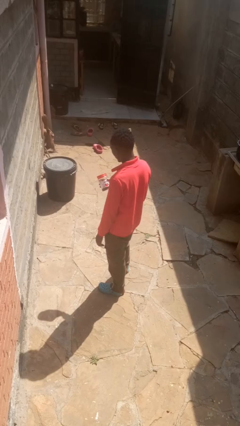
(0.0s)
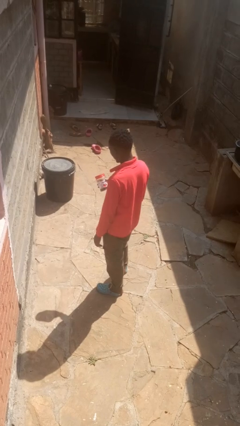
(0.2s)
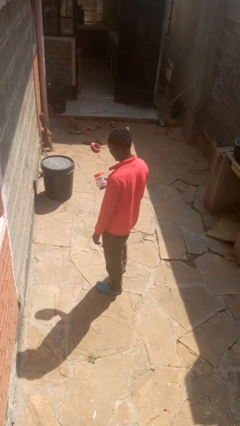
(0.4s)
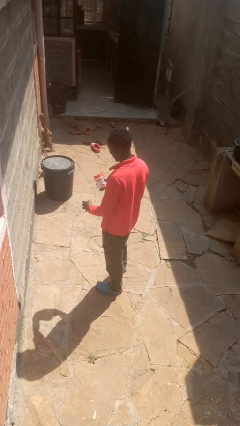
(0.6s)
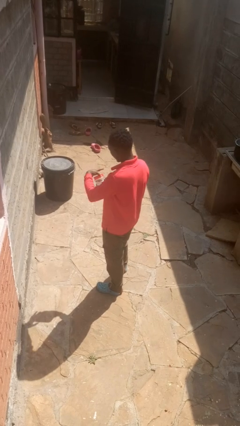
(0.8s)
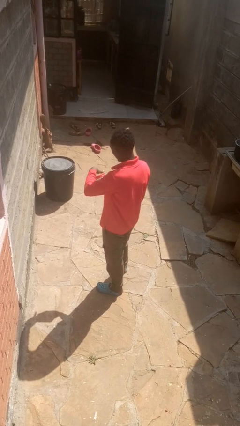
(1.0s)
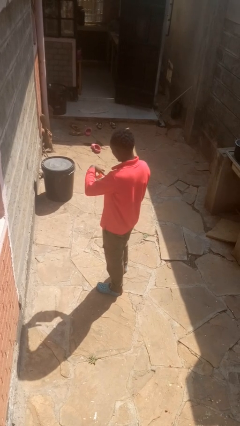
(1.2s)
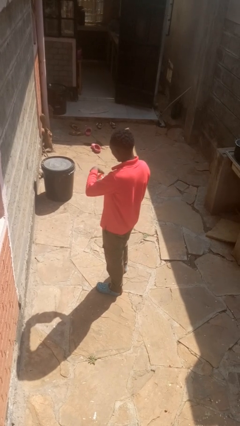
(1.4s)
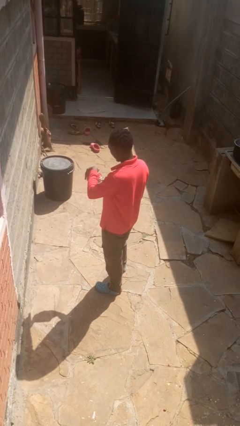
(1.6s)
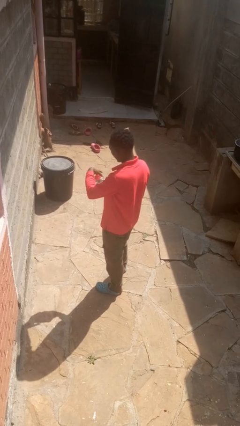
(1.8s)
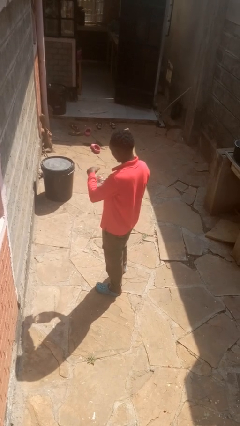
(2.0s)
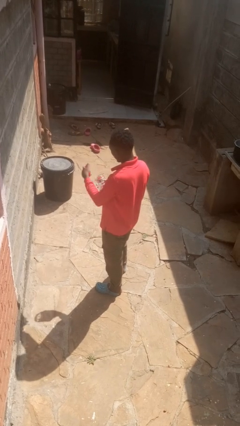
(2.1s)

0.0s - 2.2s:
person opens jar

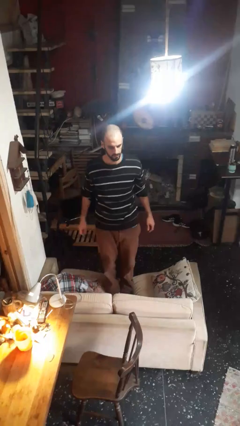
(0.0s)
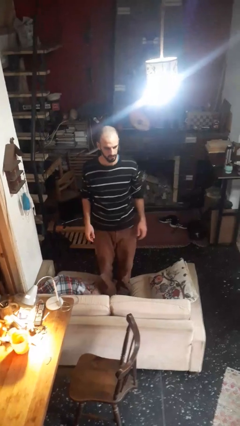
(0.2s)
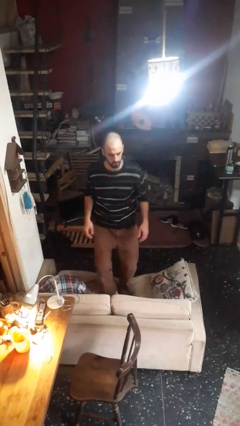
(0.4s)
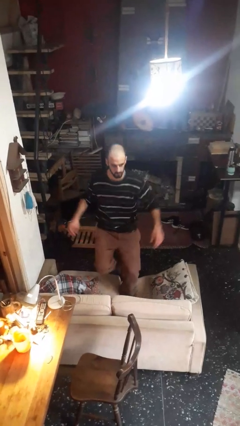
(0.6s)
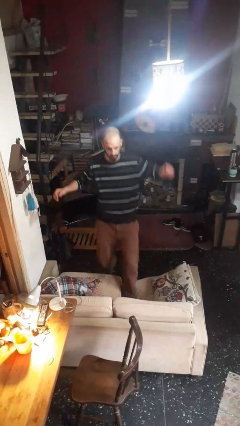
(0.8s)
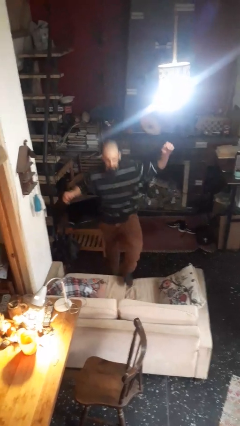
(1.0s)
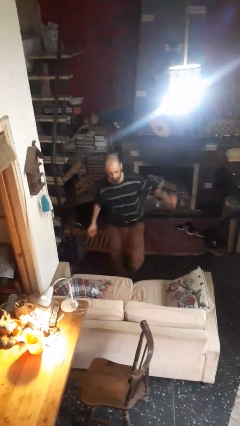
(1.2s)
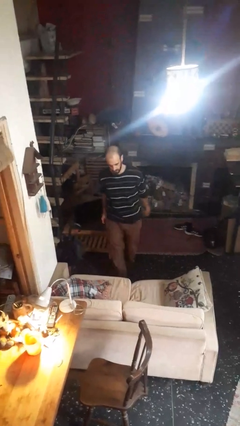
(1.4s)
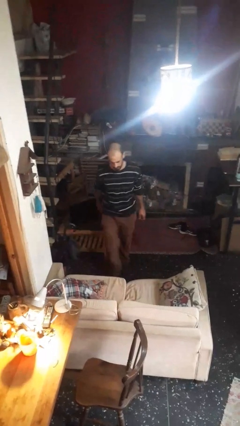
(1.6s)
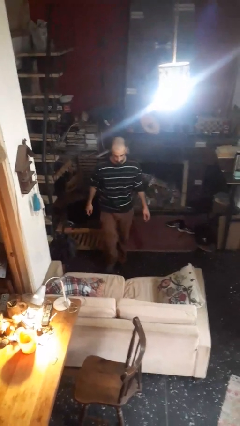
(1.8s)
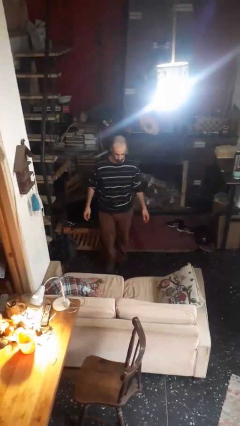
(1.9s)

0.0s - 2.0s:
person climbs off couch

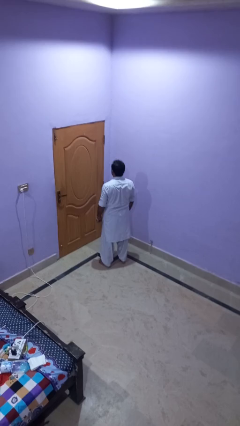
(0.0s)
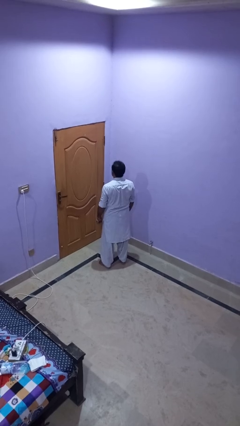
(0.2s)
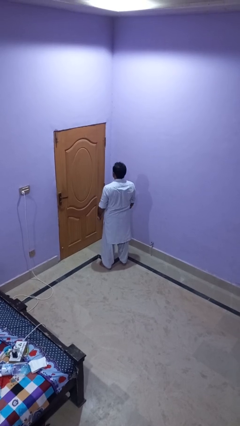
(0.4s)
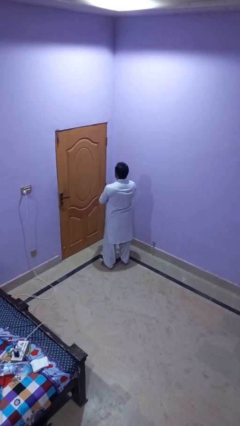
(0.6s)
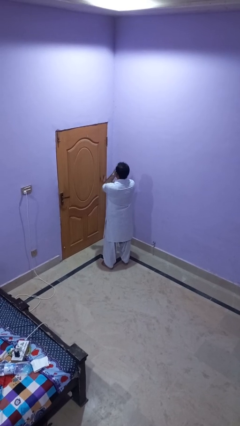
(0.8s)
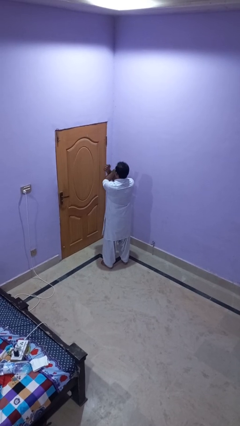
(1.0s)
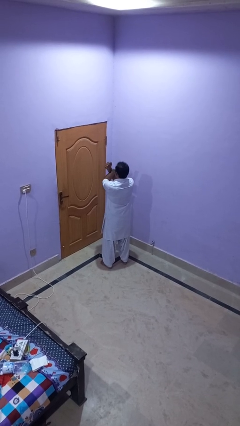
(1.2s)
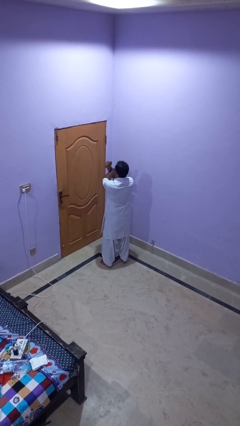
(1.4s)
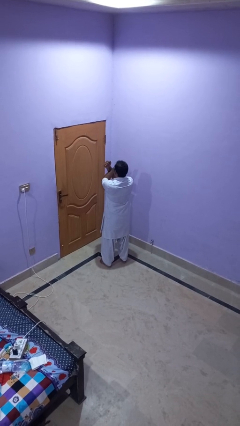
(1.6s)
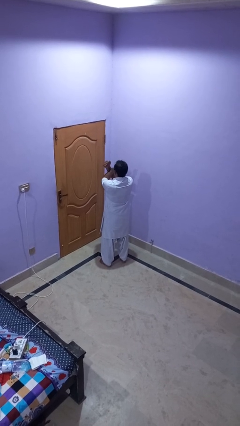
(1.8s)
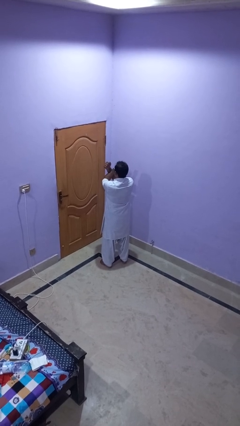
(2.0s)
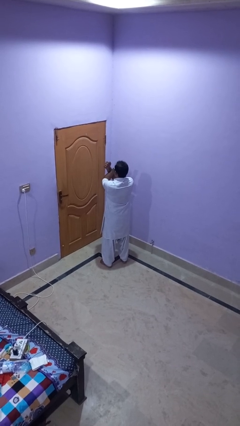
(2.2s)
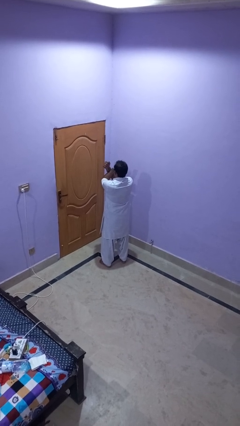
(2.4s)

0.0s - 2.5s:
person crosses arms

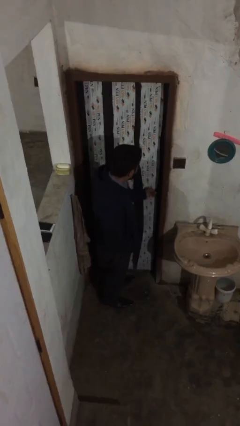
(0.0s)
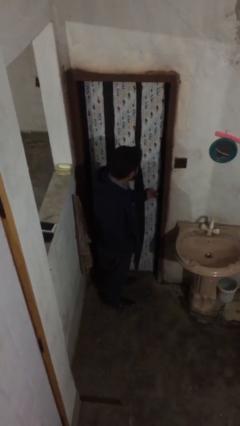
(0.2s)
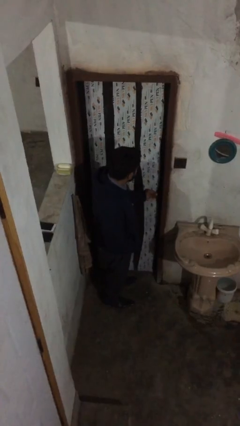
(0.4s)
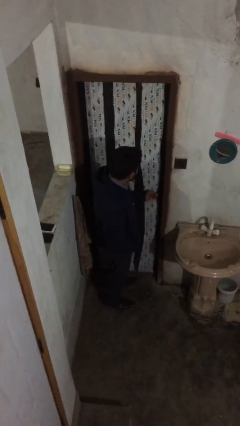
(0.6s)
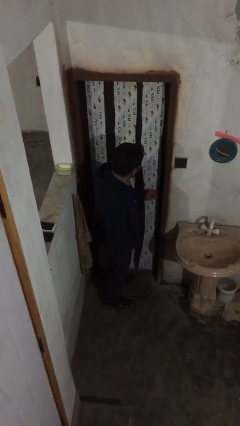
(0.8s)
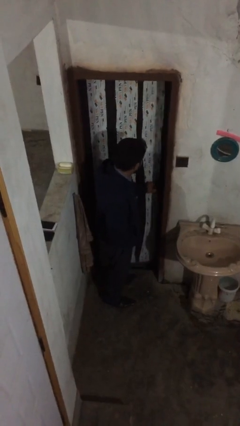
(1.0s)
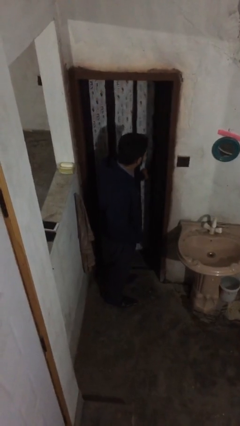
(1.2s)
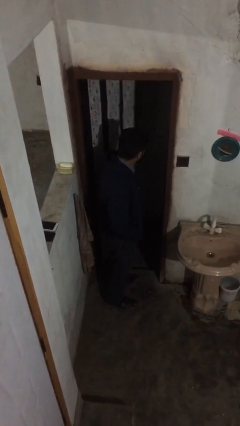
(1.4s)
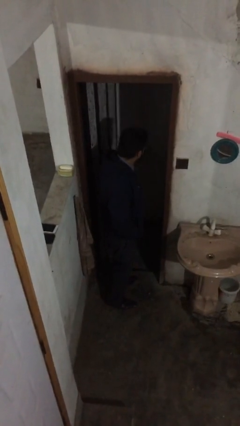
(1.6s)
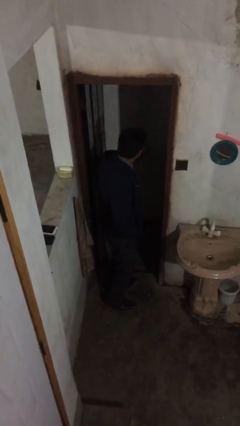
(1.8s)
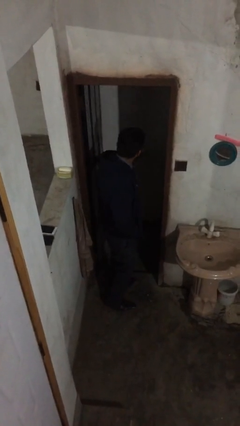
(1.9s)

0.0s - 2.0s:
person opens facility door

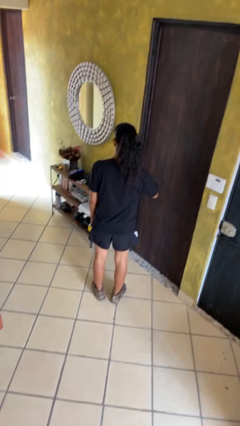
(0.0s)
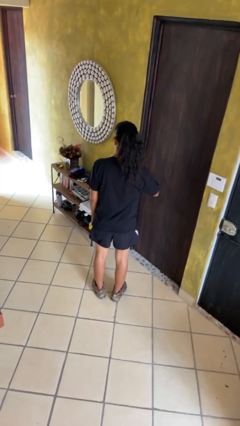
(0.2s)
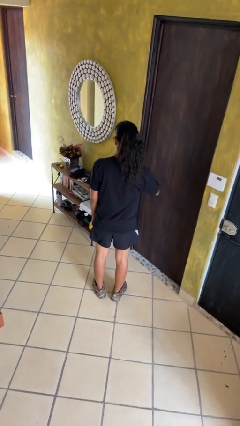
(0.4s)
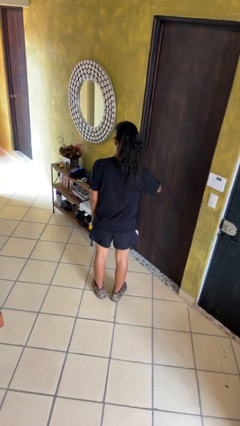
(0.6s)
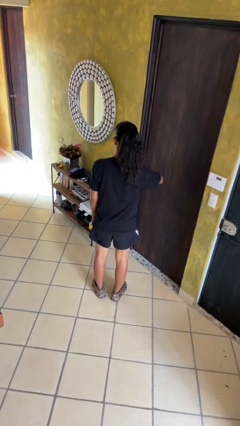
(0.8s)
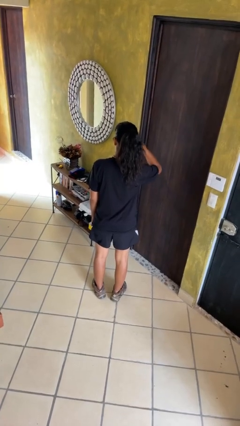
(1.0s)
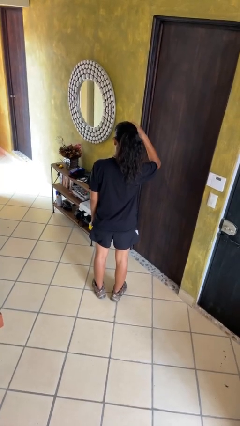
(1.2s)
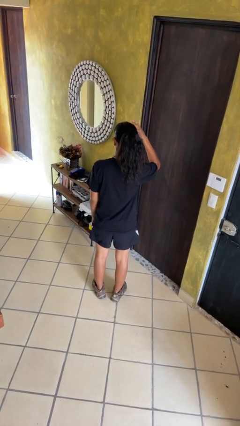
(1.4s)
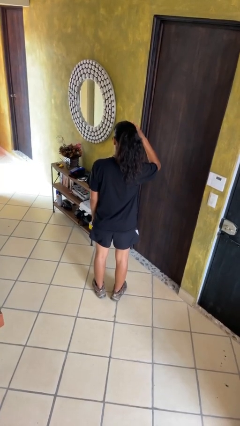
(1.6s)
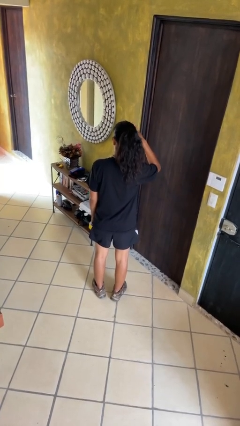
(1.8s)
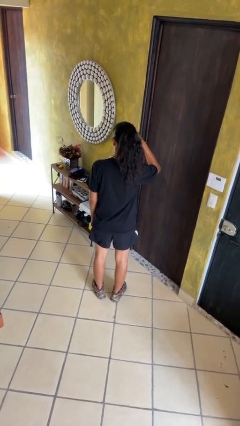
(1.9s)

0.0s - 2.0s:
person gestures swipe up

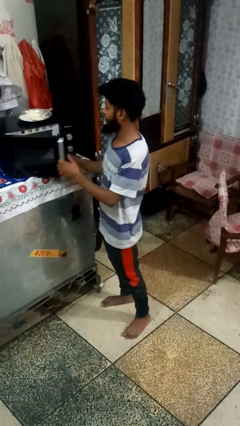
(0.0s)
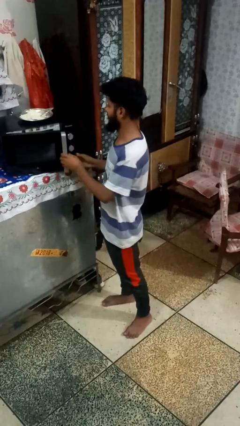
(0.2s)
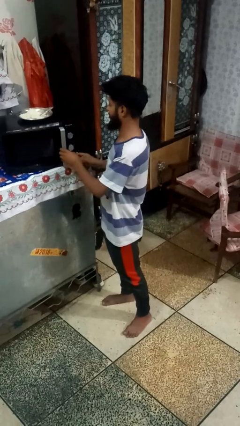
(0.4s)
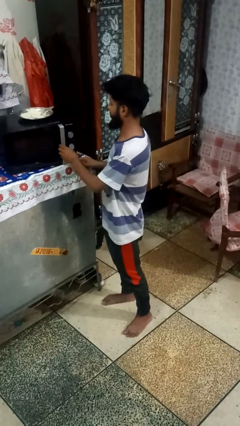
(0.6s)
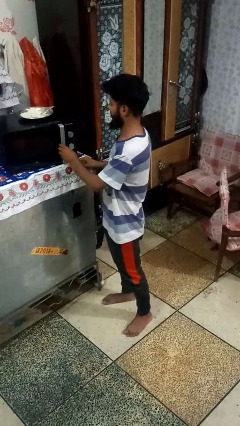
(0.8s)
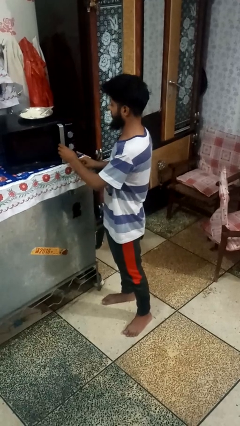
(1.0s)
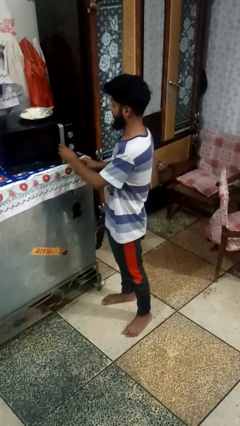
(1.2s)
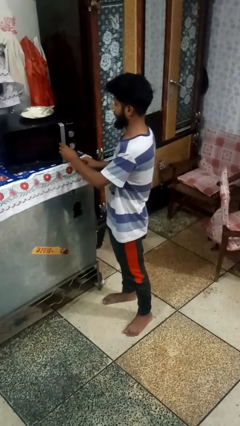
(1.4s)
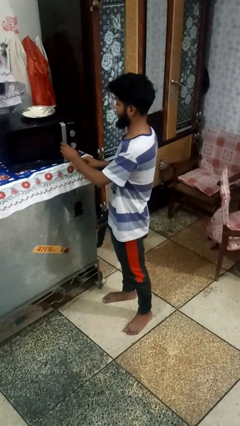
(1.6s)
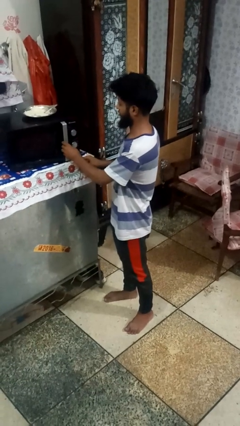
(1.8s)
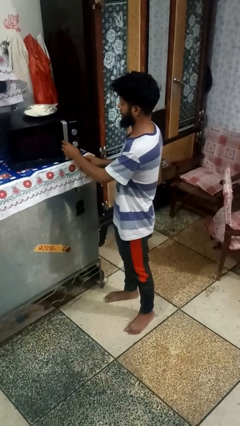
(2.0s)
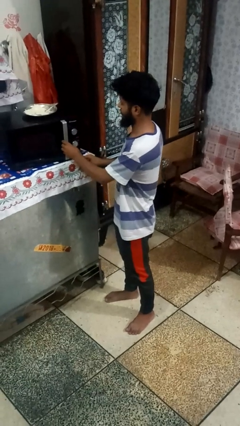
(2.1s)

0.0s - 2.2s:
person closes oven door

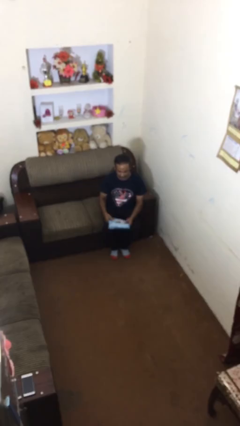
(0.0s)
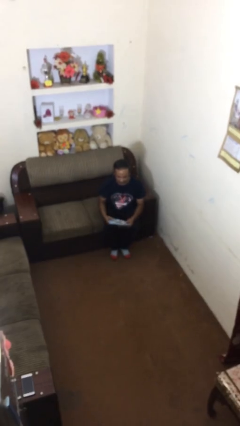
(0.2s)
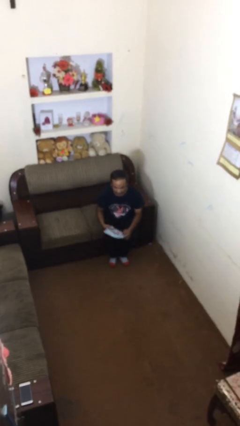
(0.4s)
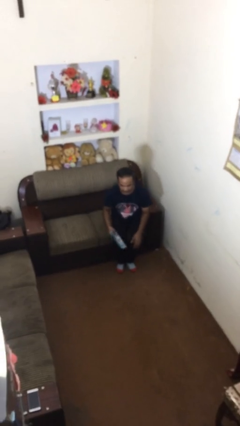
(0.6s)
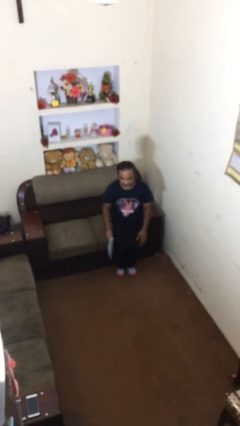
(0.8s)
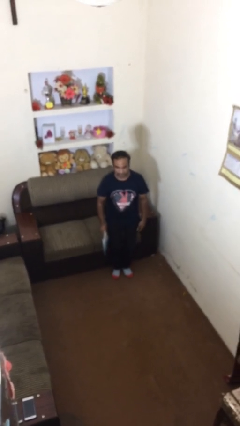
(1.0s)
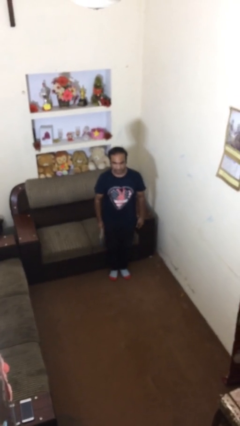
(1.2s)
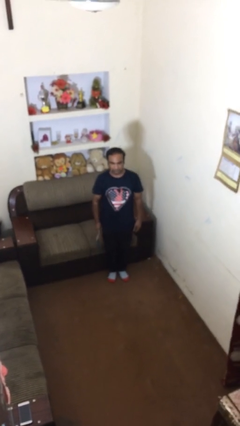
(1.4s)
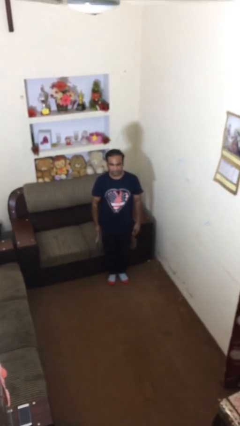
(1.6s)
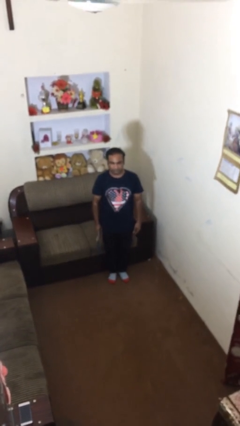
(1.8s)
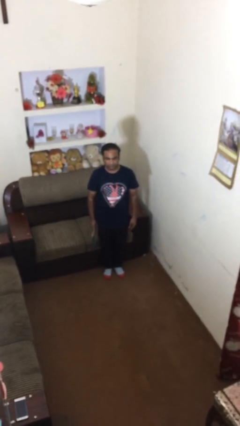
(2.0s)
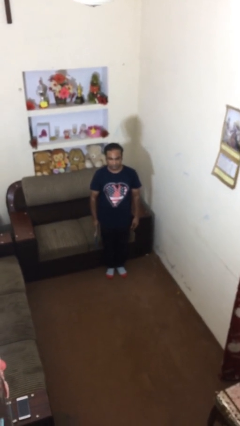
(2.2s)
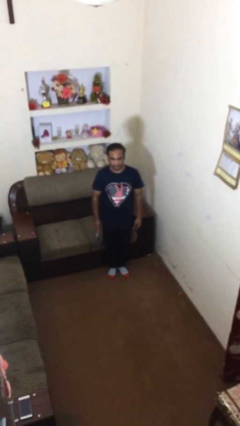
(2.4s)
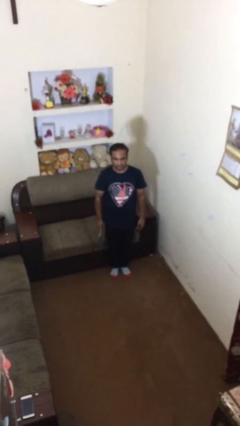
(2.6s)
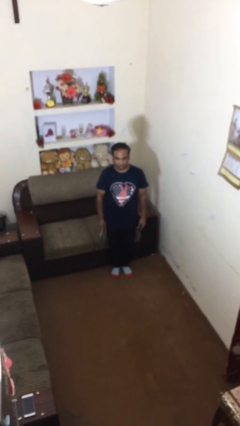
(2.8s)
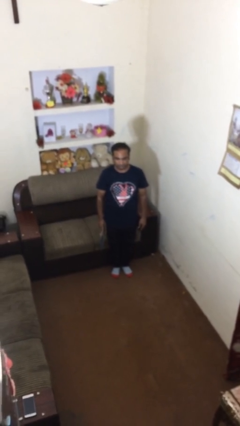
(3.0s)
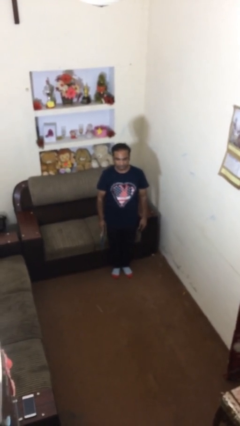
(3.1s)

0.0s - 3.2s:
person stands up

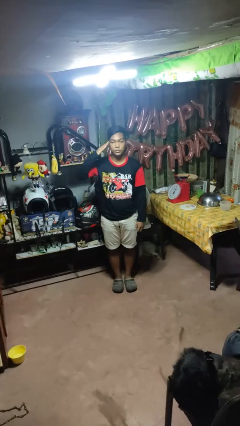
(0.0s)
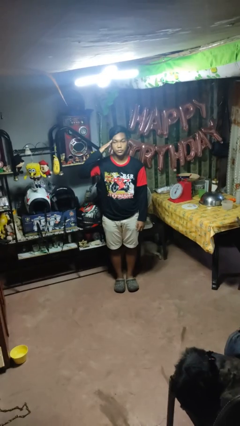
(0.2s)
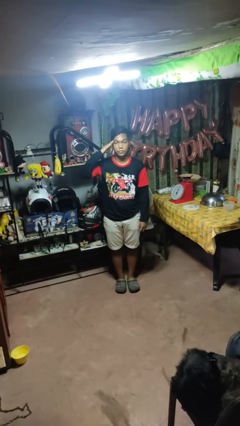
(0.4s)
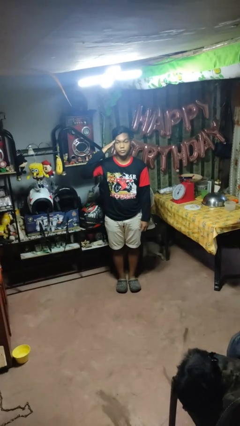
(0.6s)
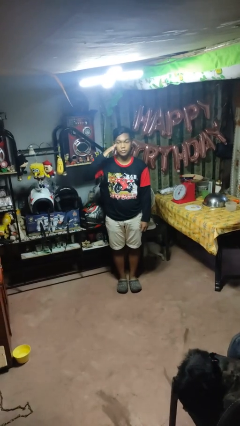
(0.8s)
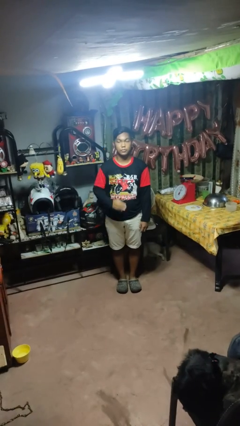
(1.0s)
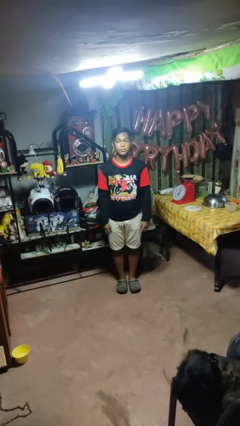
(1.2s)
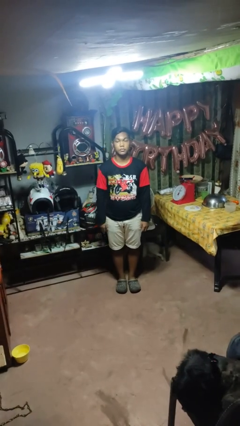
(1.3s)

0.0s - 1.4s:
person salutes
